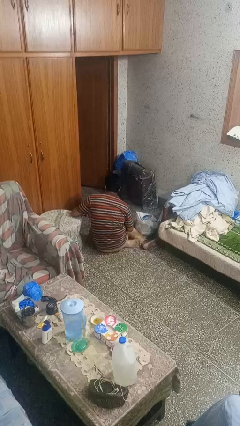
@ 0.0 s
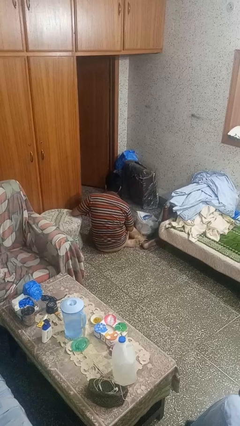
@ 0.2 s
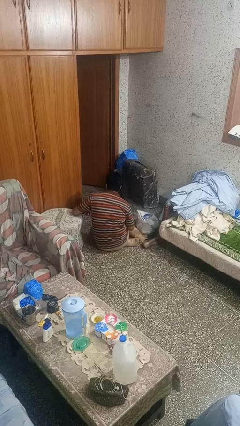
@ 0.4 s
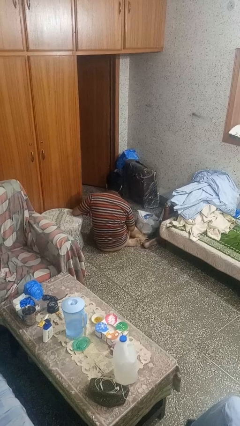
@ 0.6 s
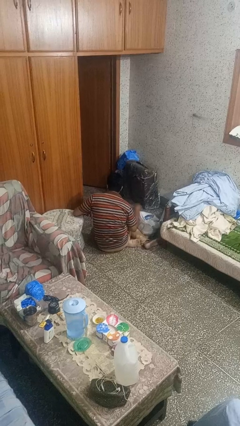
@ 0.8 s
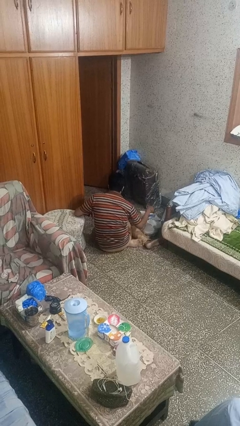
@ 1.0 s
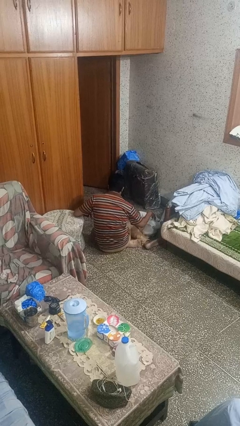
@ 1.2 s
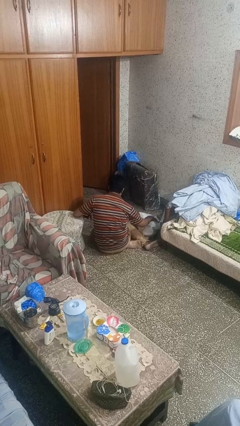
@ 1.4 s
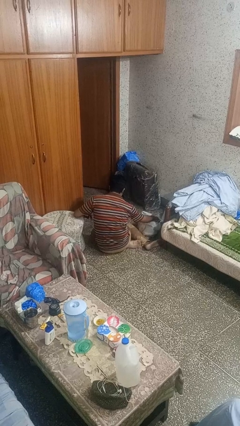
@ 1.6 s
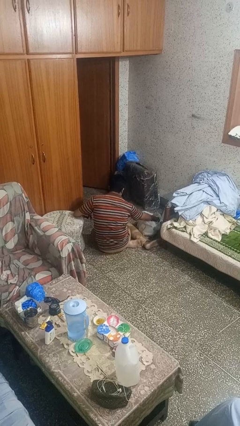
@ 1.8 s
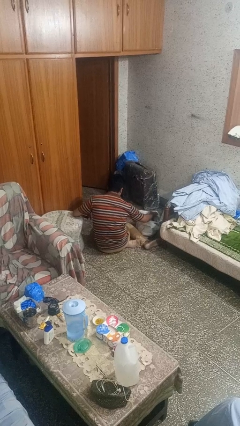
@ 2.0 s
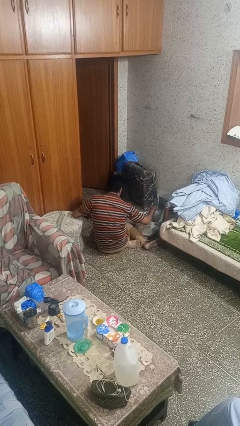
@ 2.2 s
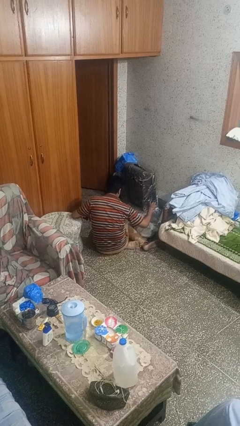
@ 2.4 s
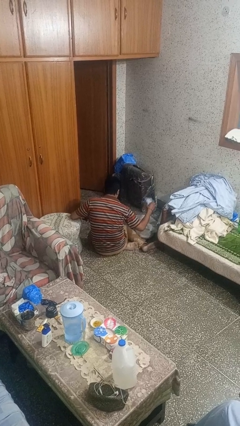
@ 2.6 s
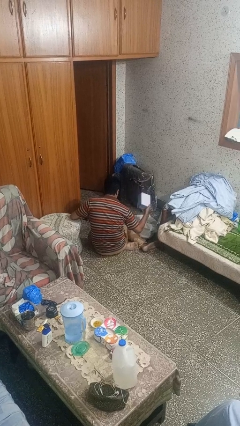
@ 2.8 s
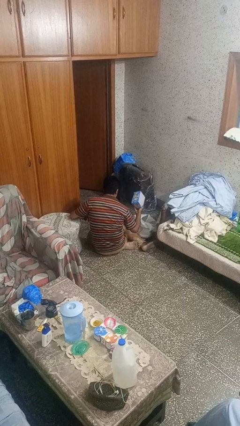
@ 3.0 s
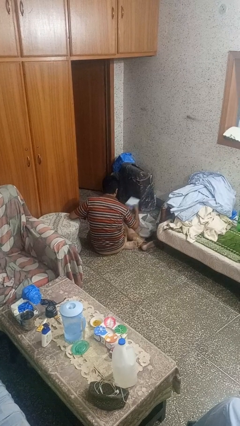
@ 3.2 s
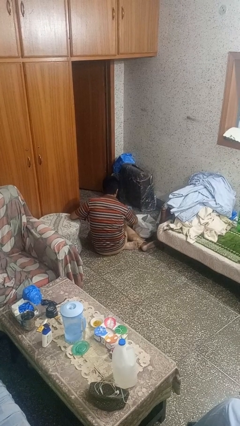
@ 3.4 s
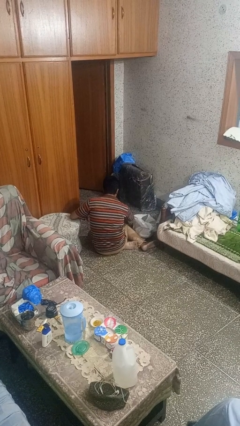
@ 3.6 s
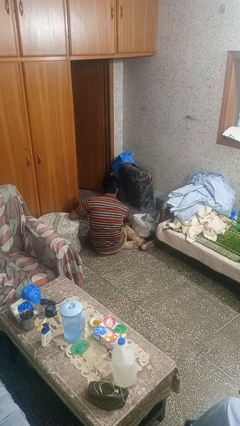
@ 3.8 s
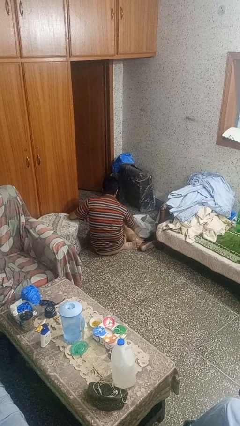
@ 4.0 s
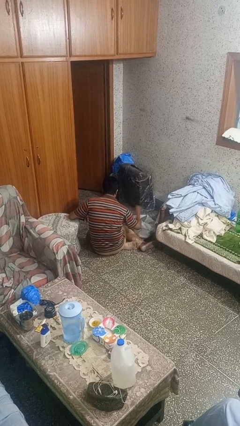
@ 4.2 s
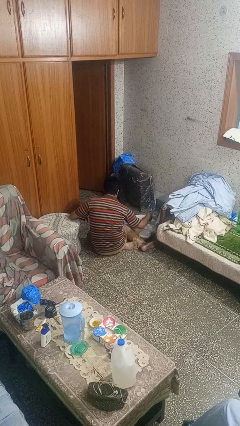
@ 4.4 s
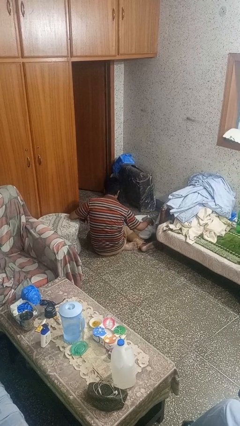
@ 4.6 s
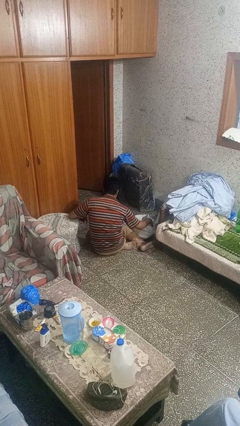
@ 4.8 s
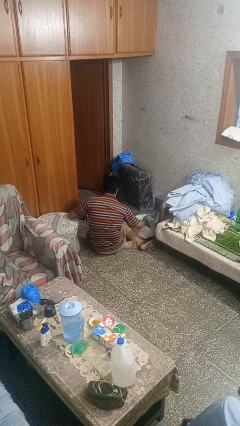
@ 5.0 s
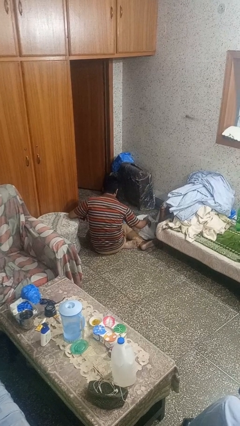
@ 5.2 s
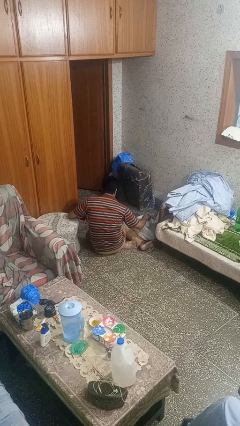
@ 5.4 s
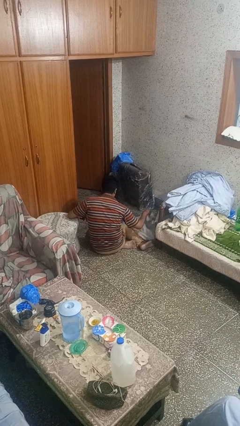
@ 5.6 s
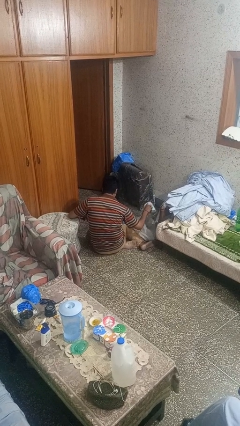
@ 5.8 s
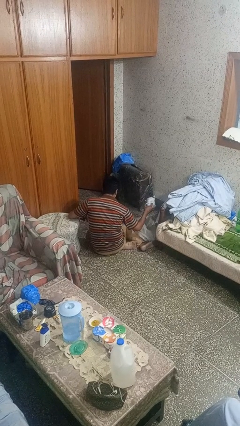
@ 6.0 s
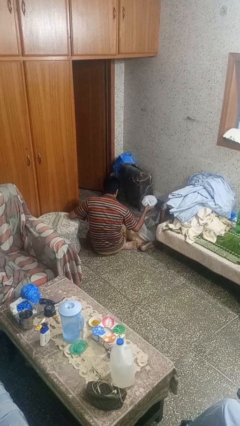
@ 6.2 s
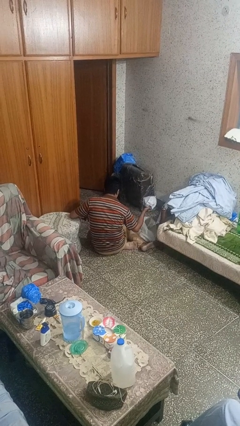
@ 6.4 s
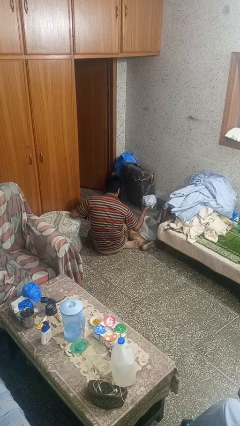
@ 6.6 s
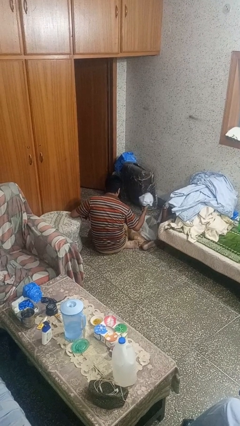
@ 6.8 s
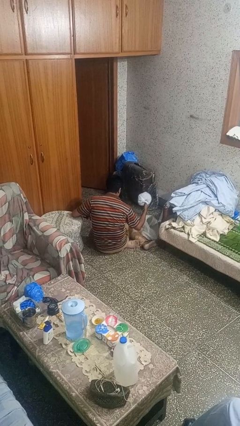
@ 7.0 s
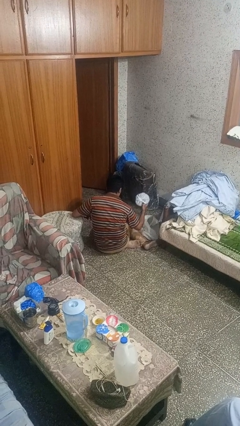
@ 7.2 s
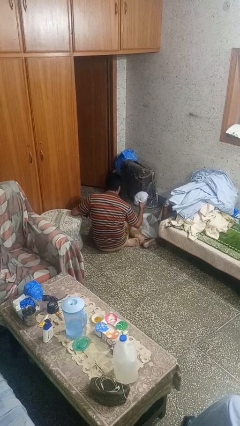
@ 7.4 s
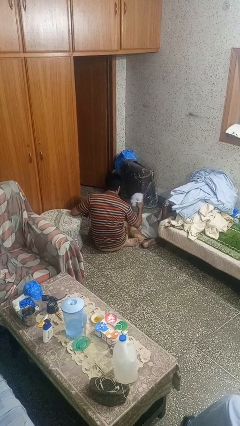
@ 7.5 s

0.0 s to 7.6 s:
person takes object from bag

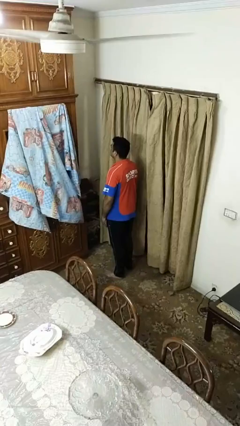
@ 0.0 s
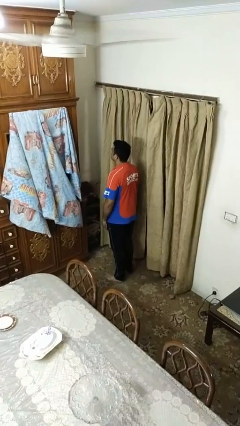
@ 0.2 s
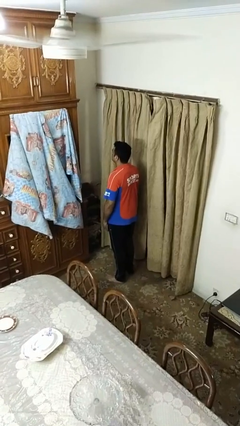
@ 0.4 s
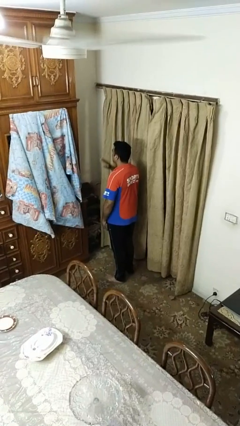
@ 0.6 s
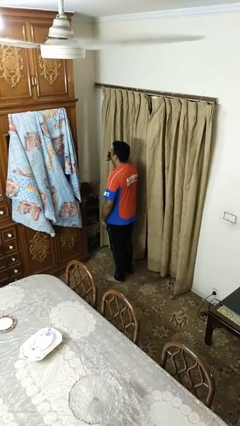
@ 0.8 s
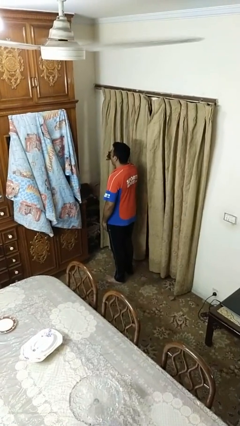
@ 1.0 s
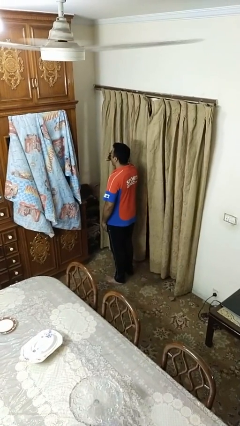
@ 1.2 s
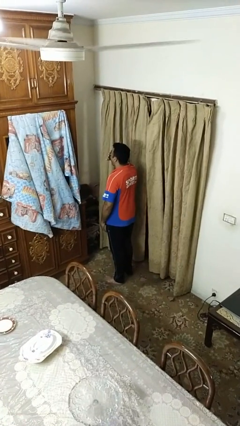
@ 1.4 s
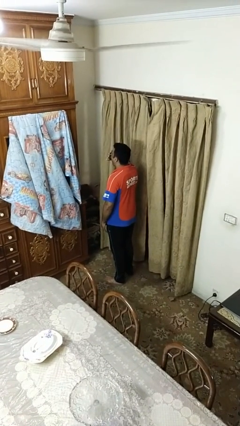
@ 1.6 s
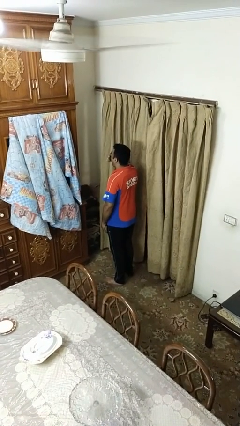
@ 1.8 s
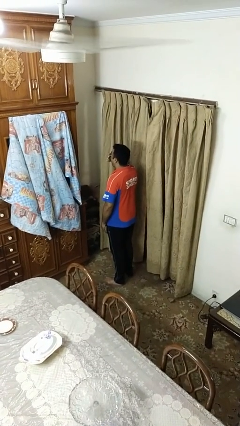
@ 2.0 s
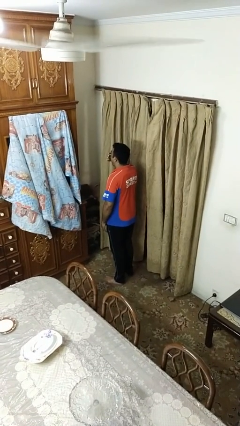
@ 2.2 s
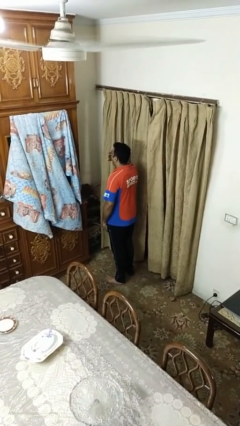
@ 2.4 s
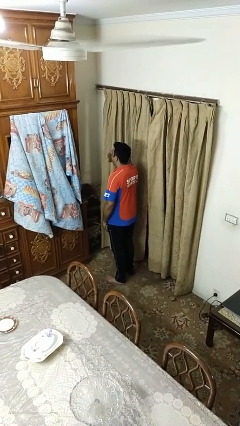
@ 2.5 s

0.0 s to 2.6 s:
person yawns

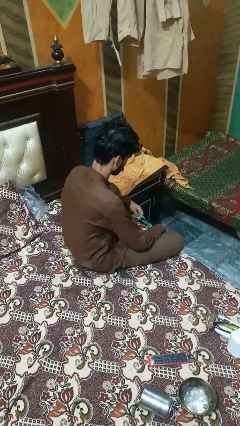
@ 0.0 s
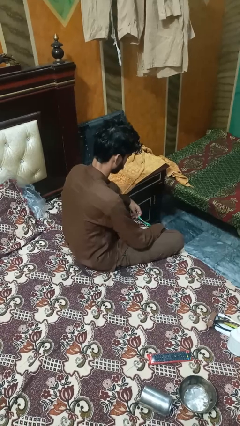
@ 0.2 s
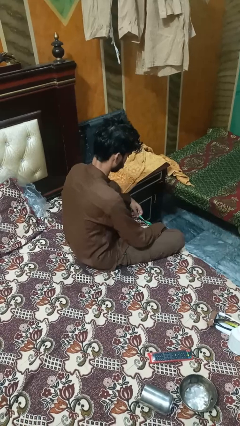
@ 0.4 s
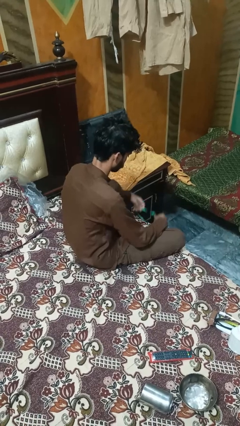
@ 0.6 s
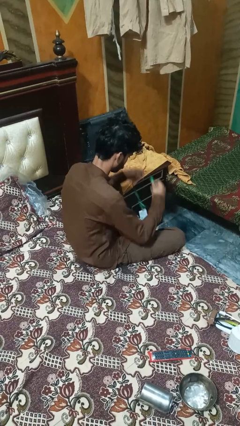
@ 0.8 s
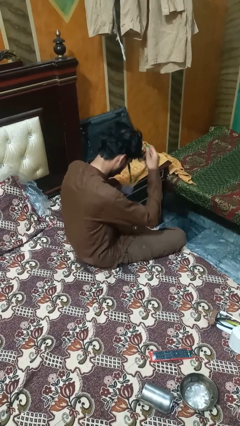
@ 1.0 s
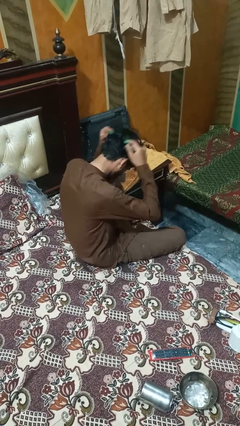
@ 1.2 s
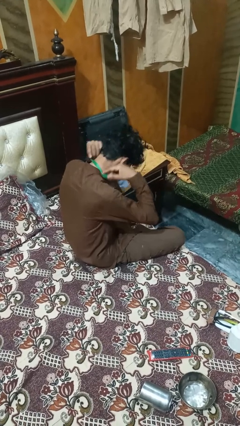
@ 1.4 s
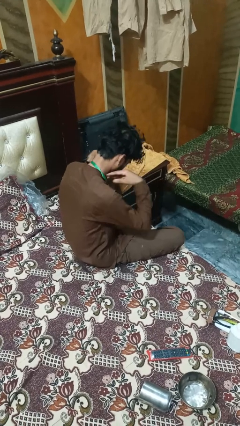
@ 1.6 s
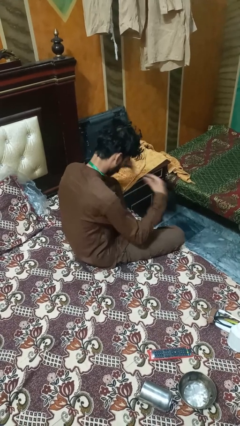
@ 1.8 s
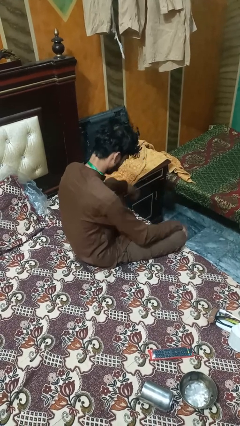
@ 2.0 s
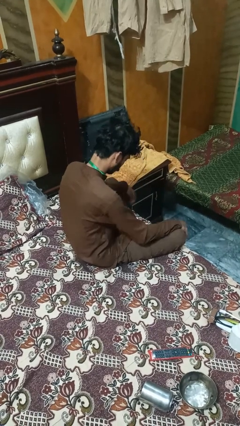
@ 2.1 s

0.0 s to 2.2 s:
person puts on necklace

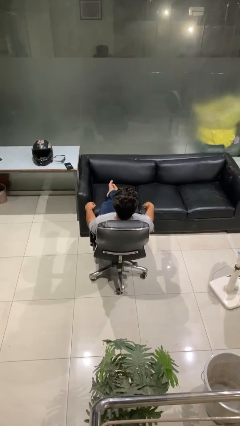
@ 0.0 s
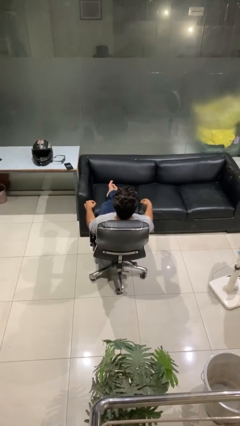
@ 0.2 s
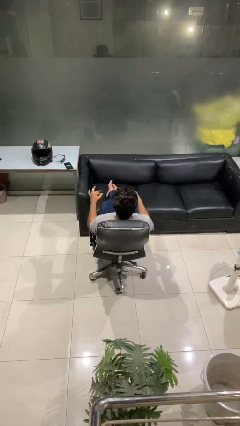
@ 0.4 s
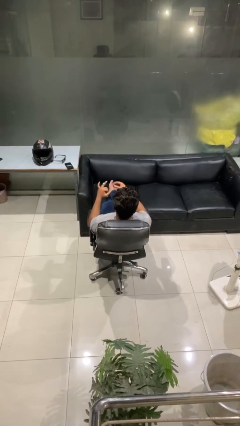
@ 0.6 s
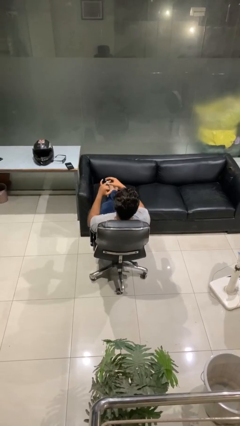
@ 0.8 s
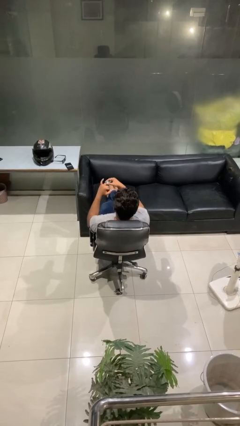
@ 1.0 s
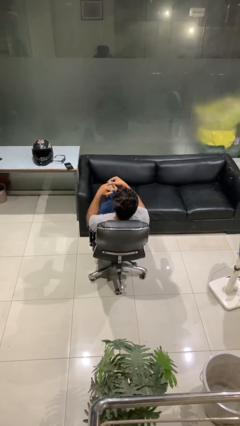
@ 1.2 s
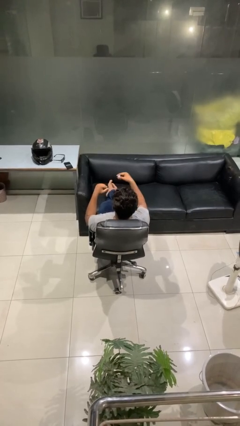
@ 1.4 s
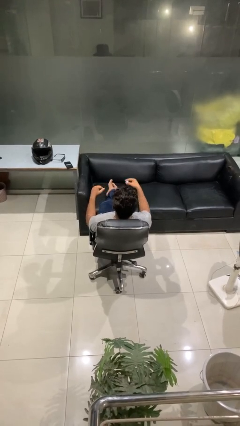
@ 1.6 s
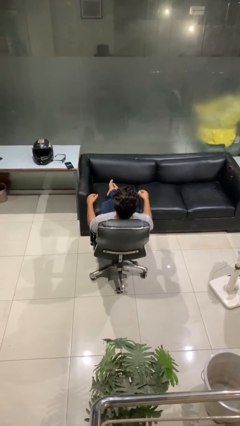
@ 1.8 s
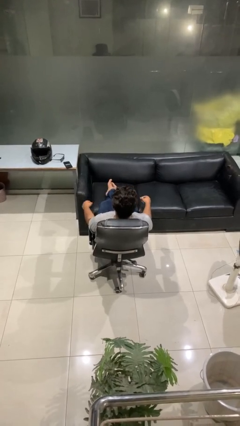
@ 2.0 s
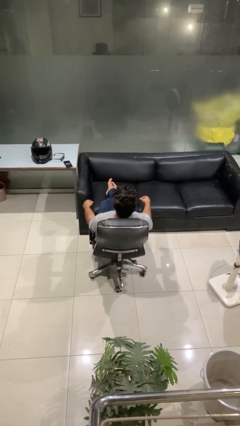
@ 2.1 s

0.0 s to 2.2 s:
person takes off ring

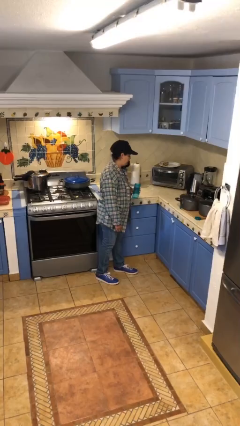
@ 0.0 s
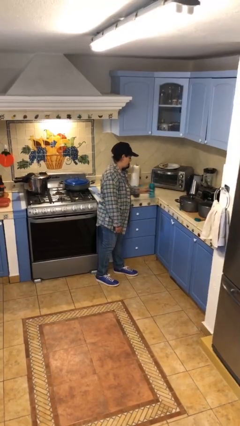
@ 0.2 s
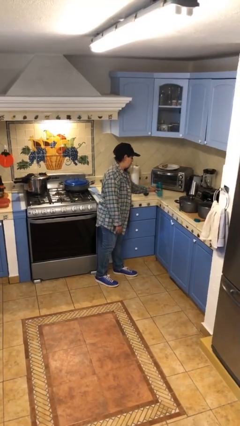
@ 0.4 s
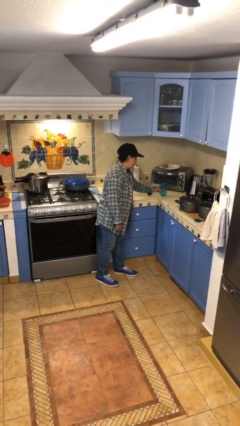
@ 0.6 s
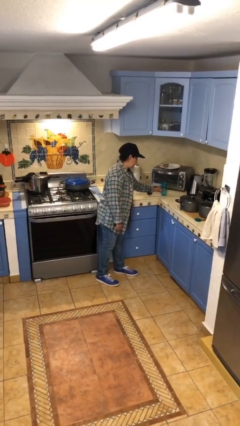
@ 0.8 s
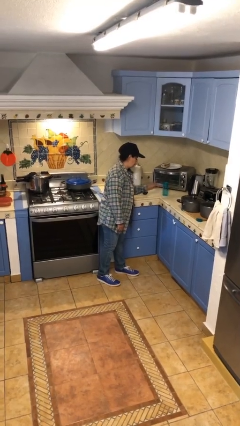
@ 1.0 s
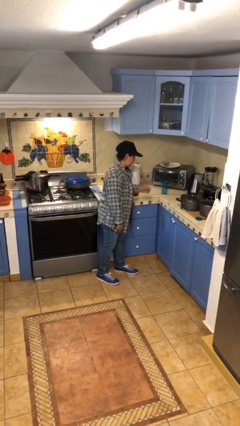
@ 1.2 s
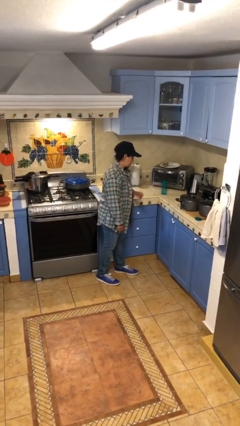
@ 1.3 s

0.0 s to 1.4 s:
person puts down object on countertop

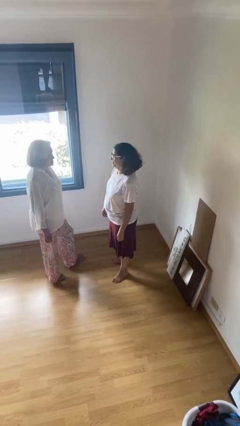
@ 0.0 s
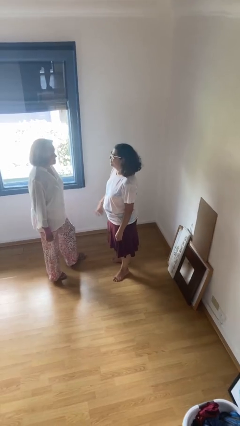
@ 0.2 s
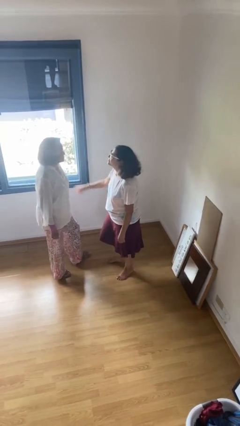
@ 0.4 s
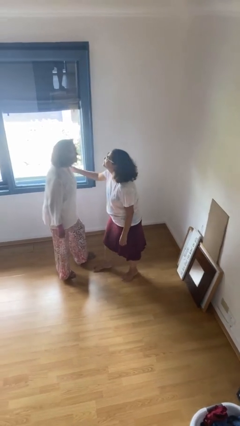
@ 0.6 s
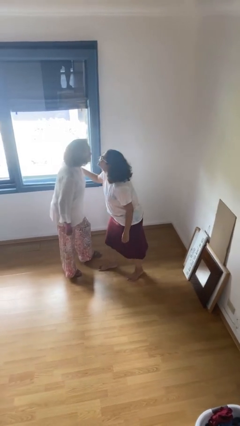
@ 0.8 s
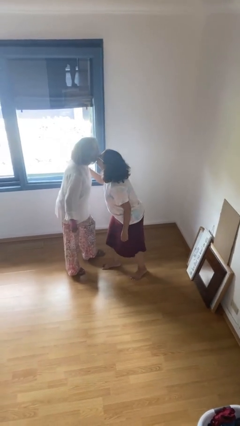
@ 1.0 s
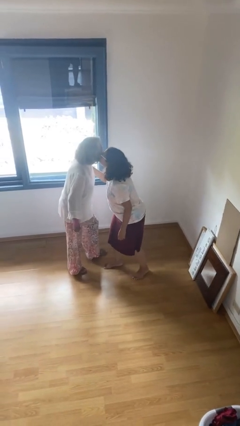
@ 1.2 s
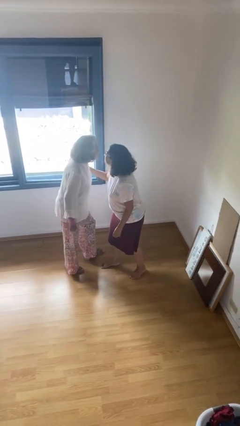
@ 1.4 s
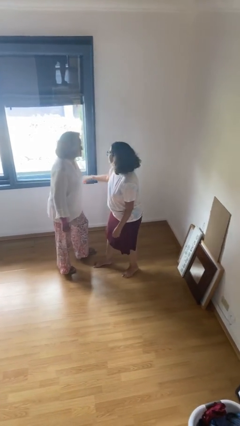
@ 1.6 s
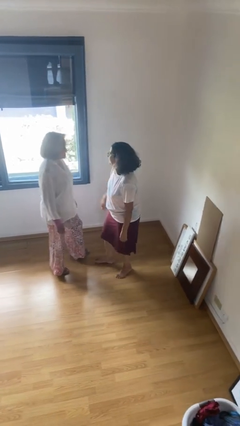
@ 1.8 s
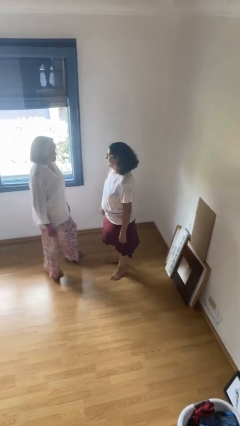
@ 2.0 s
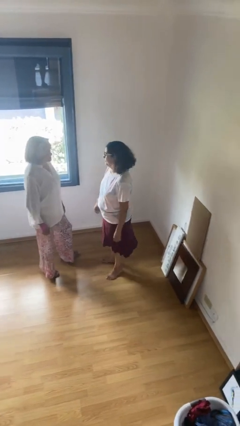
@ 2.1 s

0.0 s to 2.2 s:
person kisses cheek of person
